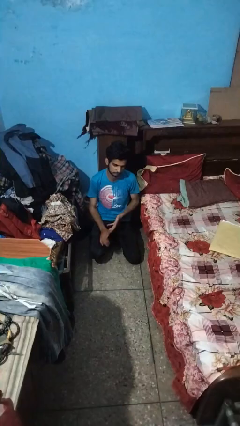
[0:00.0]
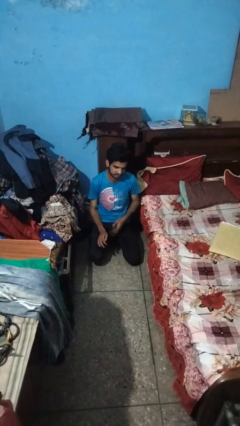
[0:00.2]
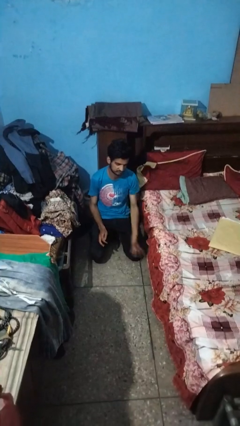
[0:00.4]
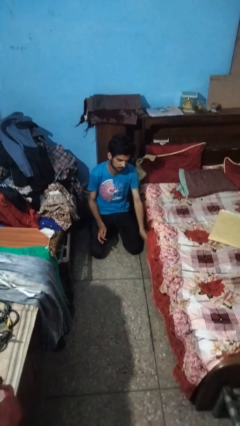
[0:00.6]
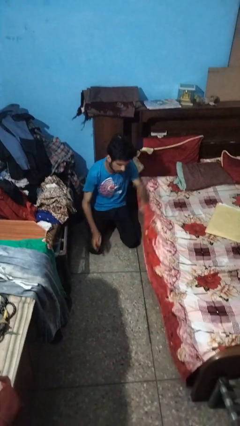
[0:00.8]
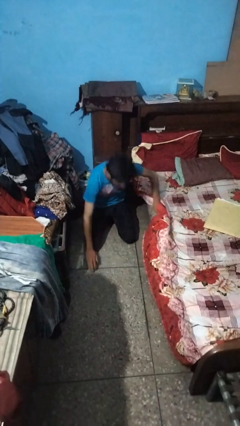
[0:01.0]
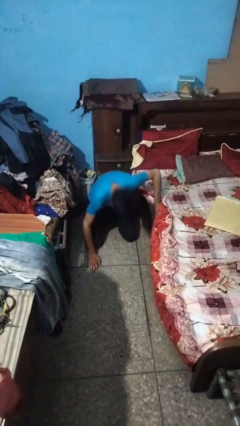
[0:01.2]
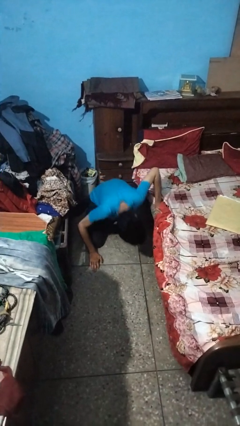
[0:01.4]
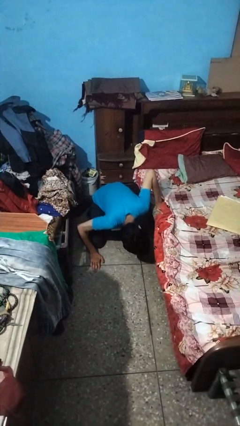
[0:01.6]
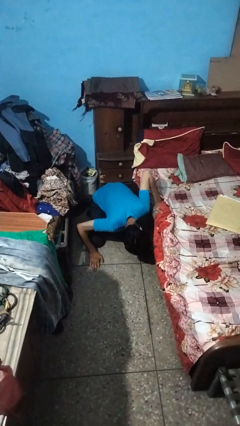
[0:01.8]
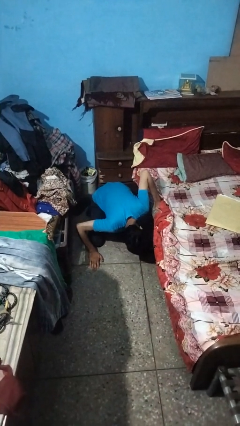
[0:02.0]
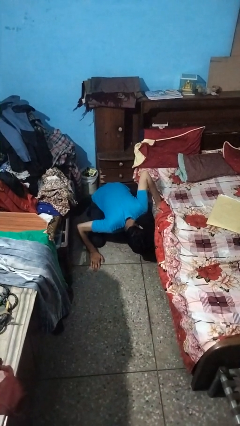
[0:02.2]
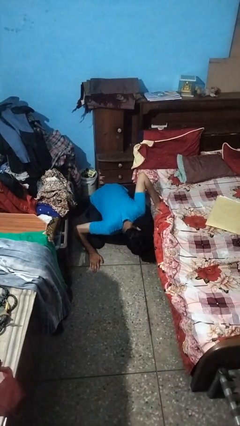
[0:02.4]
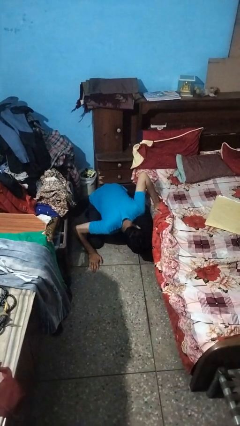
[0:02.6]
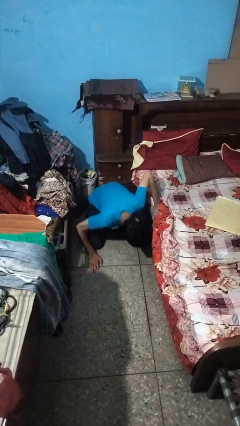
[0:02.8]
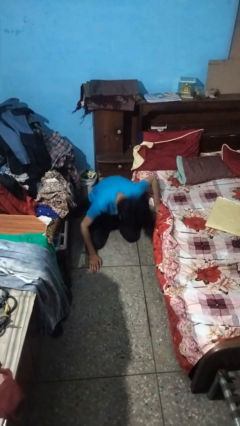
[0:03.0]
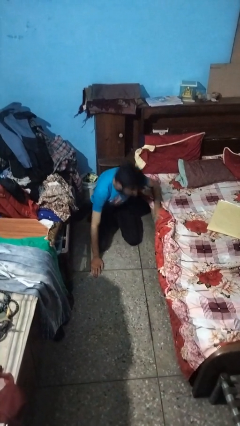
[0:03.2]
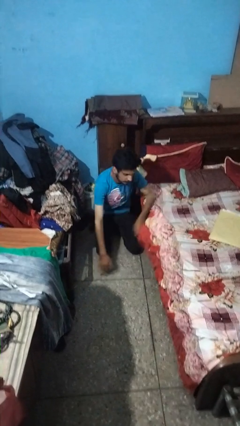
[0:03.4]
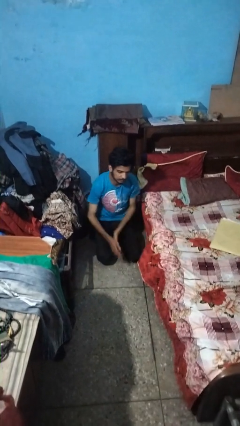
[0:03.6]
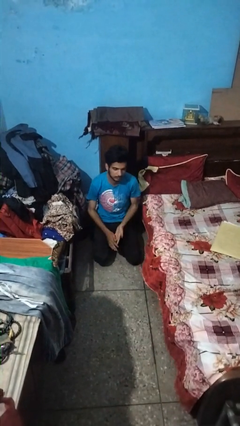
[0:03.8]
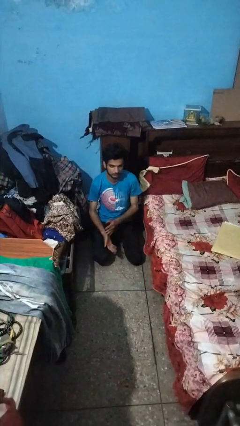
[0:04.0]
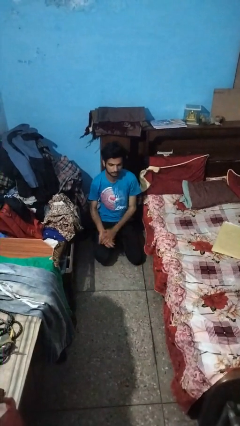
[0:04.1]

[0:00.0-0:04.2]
person searches under bed

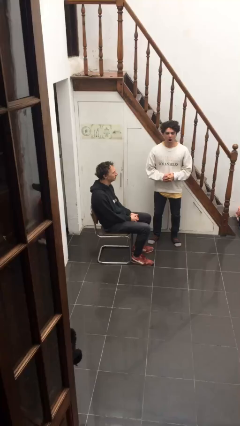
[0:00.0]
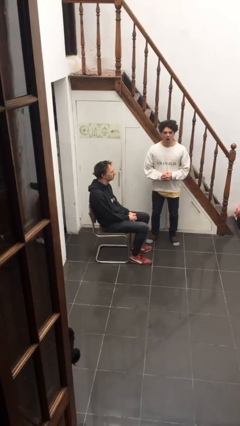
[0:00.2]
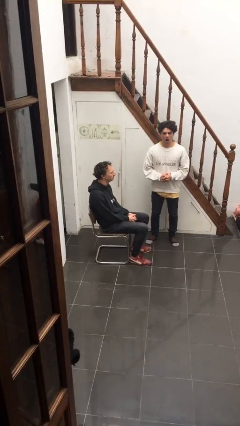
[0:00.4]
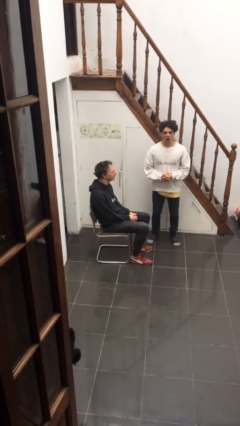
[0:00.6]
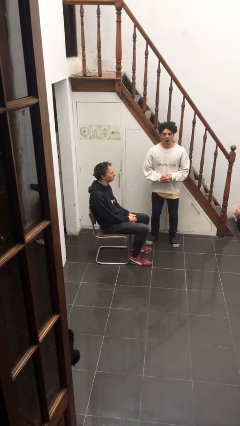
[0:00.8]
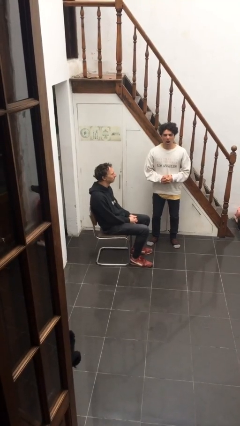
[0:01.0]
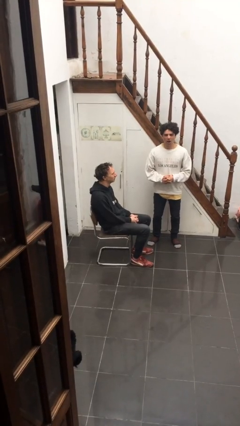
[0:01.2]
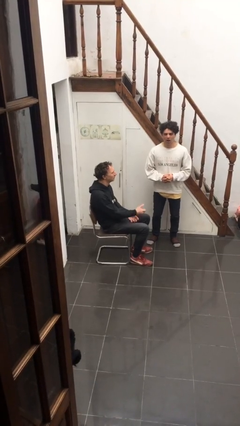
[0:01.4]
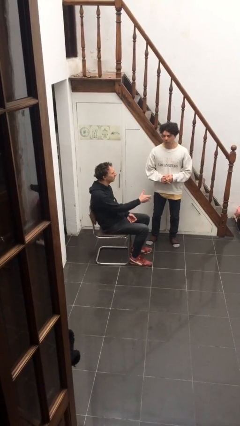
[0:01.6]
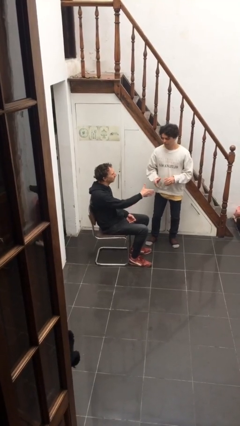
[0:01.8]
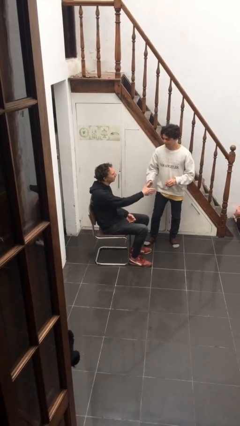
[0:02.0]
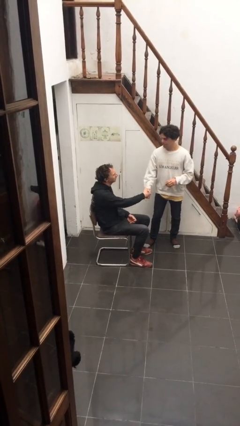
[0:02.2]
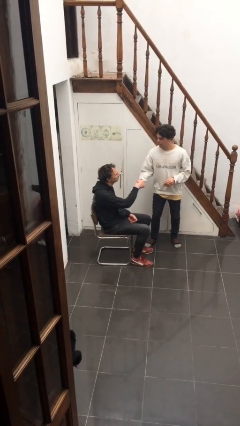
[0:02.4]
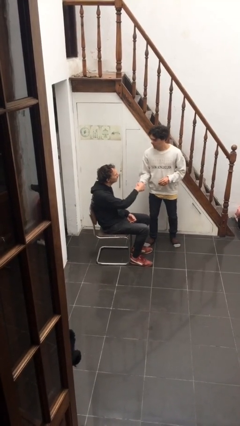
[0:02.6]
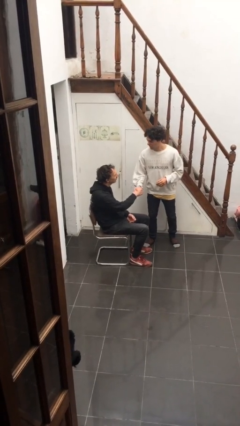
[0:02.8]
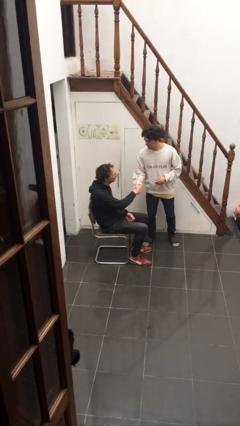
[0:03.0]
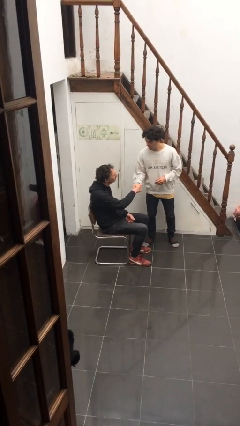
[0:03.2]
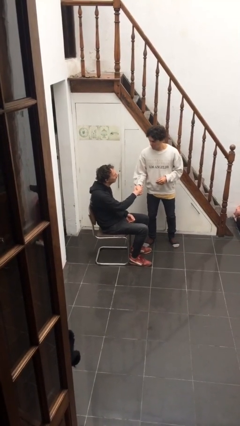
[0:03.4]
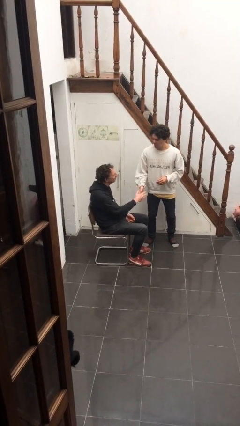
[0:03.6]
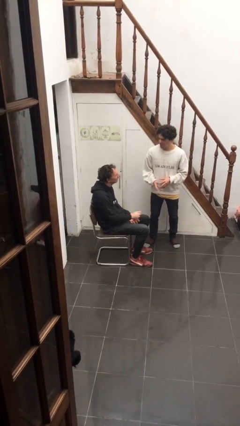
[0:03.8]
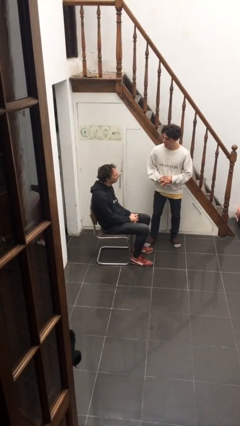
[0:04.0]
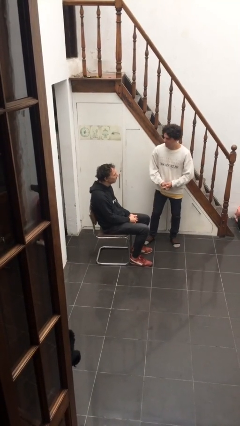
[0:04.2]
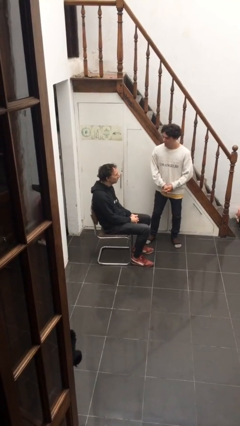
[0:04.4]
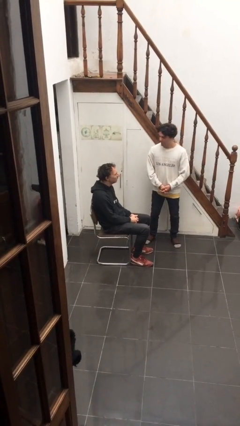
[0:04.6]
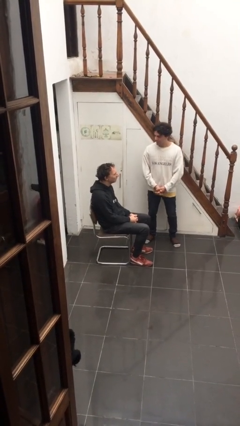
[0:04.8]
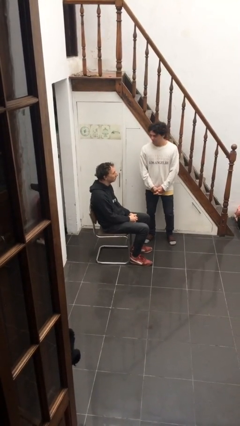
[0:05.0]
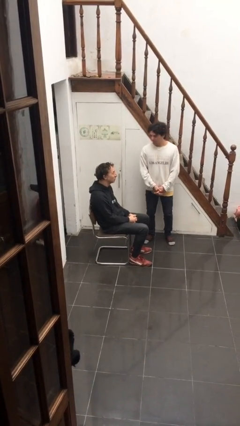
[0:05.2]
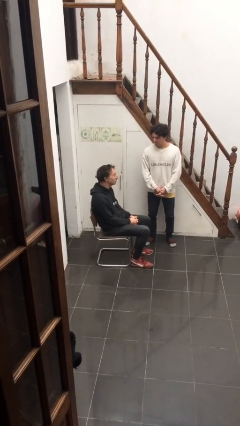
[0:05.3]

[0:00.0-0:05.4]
person shakes hand

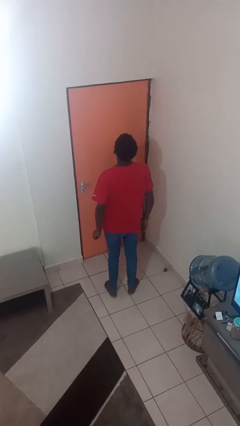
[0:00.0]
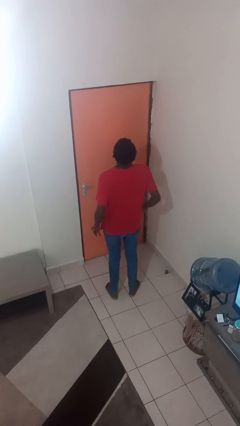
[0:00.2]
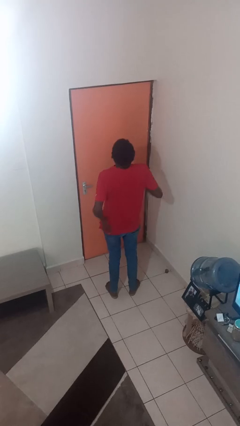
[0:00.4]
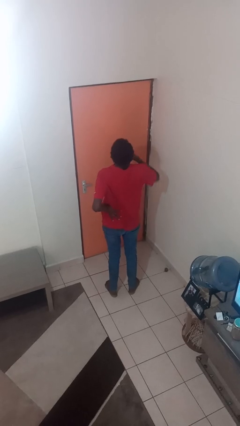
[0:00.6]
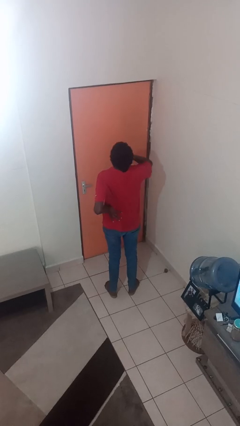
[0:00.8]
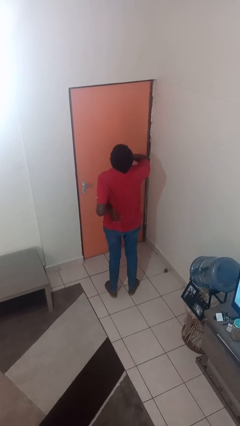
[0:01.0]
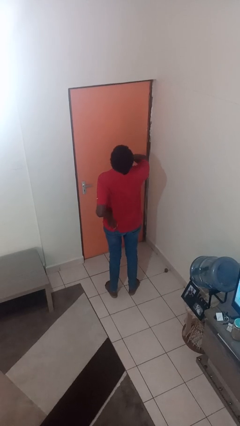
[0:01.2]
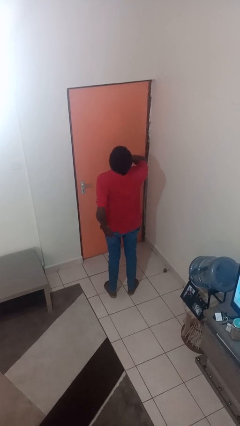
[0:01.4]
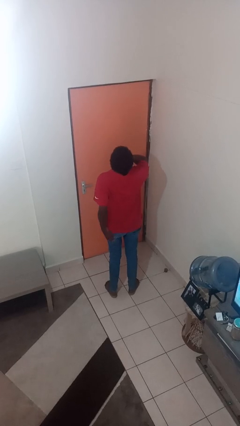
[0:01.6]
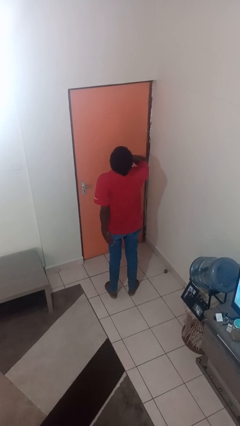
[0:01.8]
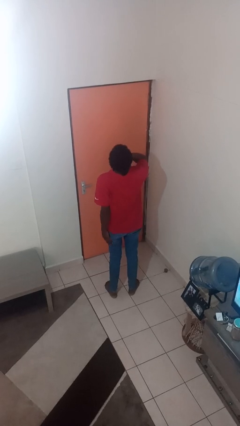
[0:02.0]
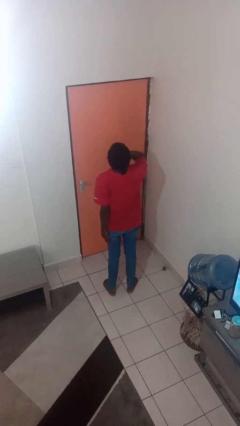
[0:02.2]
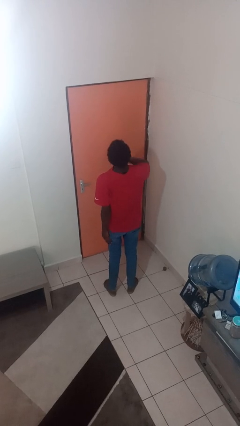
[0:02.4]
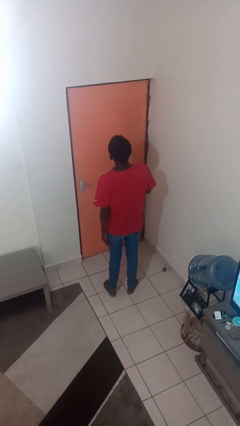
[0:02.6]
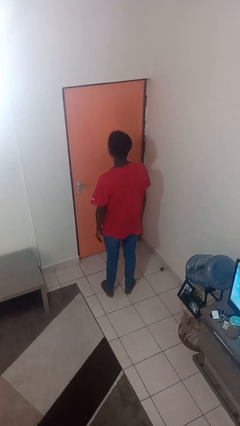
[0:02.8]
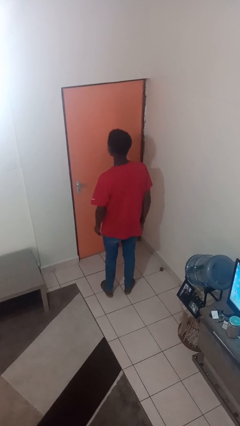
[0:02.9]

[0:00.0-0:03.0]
person yawns

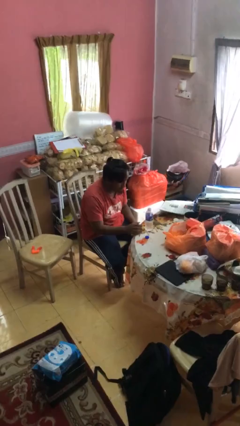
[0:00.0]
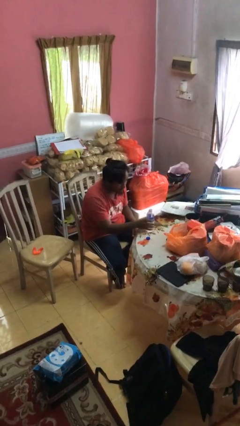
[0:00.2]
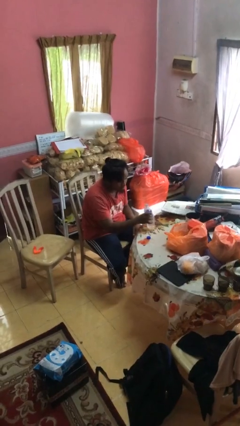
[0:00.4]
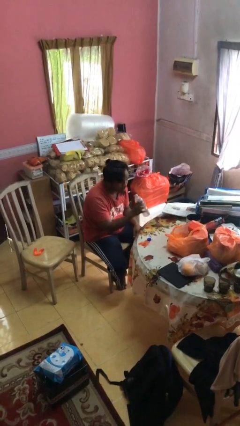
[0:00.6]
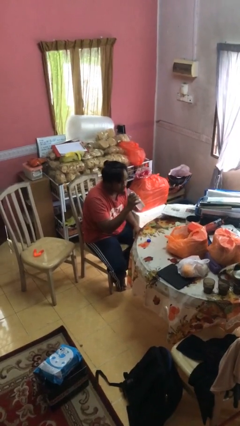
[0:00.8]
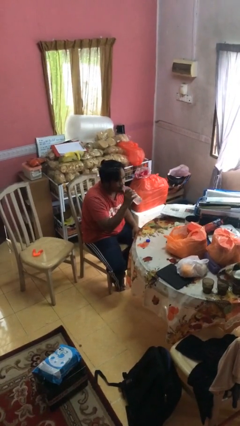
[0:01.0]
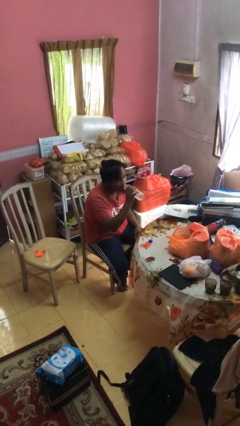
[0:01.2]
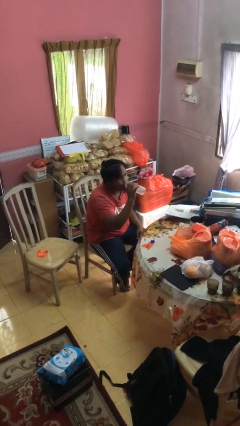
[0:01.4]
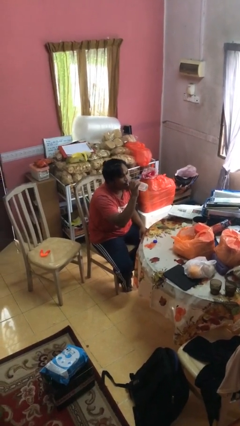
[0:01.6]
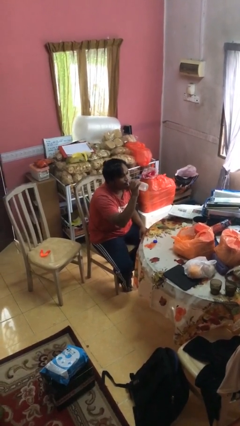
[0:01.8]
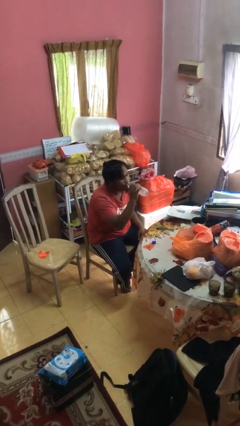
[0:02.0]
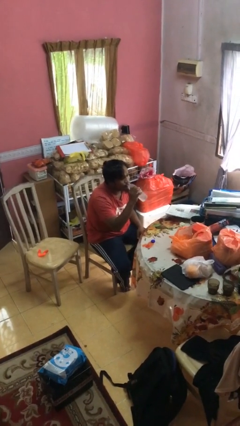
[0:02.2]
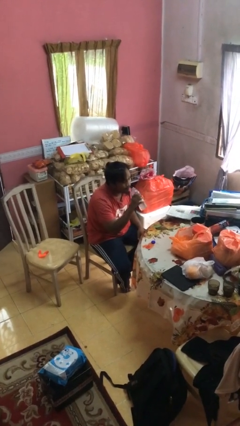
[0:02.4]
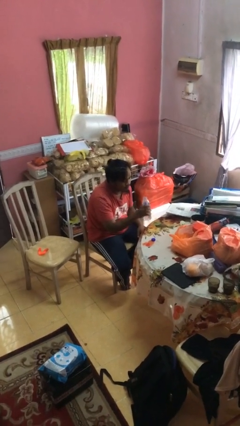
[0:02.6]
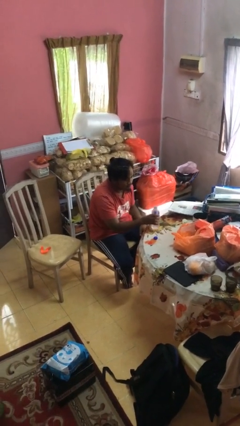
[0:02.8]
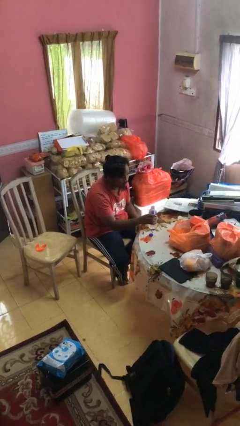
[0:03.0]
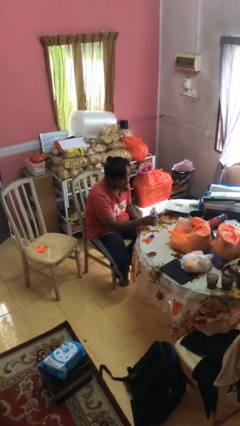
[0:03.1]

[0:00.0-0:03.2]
person drinks from bottle

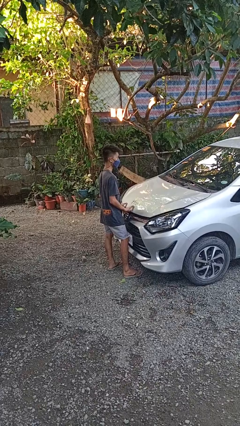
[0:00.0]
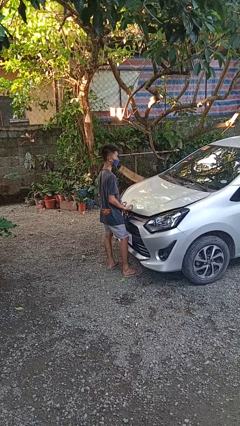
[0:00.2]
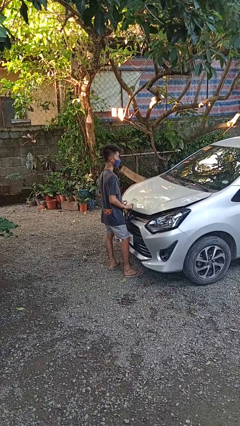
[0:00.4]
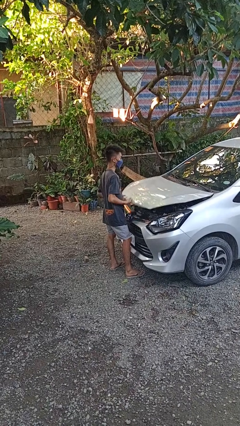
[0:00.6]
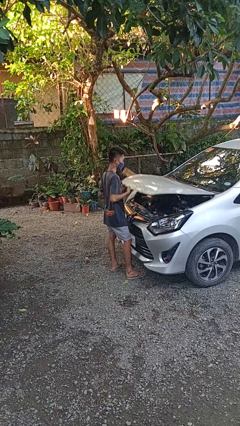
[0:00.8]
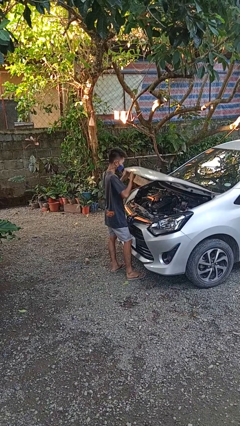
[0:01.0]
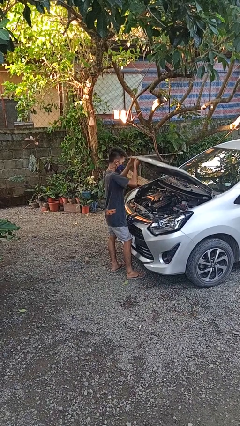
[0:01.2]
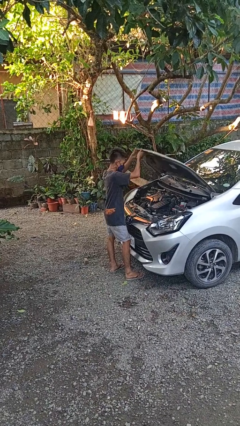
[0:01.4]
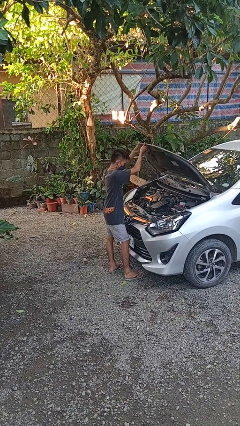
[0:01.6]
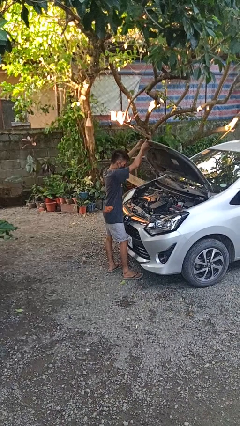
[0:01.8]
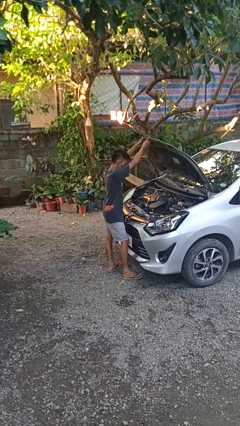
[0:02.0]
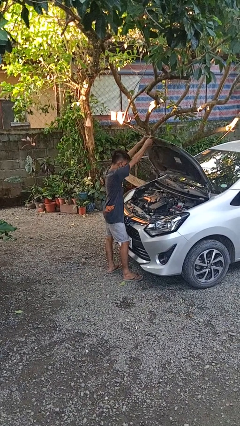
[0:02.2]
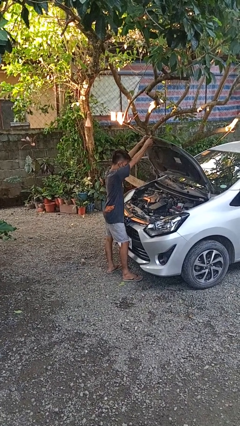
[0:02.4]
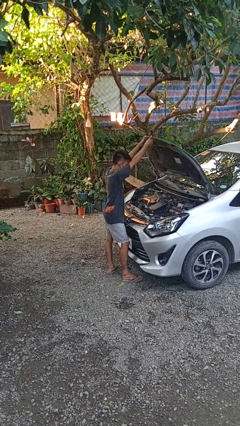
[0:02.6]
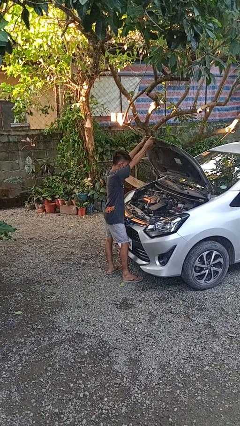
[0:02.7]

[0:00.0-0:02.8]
person opens car hood
